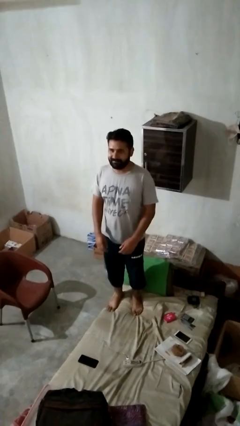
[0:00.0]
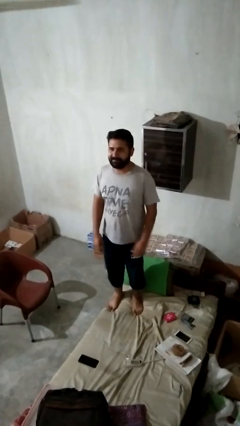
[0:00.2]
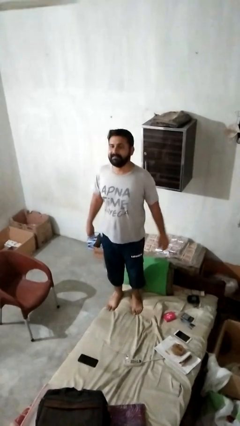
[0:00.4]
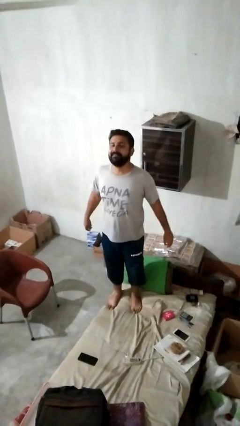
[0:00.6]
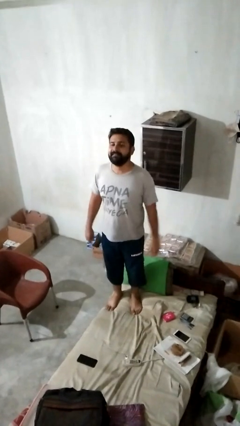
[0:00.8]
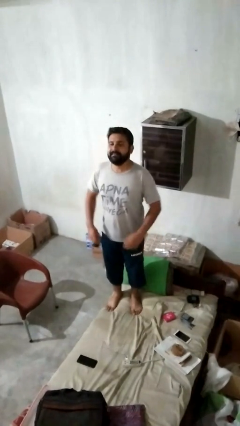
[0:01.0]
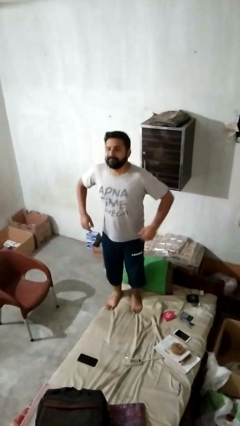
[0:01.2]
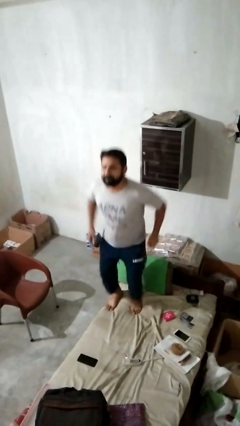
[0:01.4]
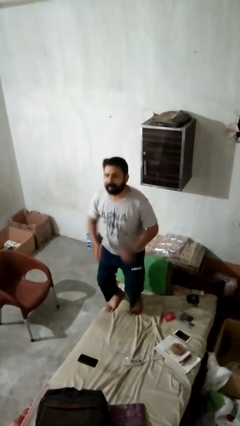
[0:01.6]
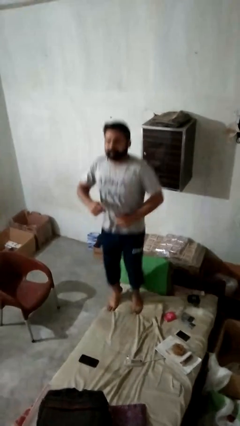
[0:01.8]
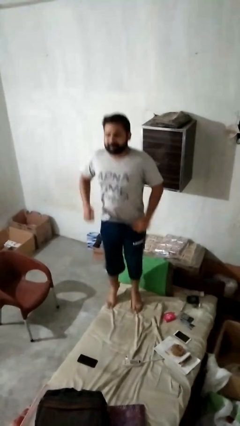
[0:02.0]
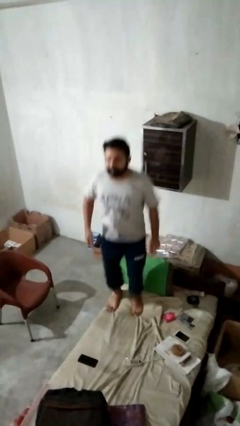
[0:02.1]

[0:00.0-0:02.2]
person jumps on bed

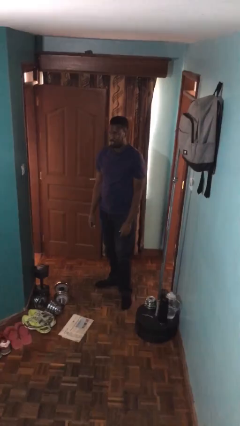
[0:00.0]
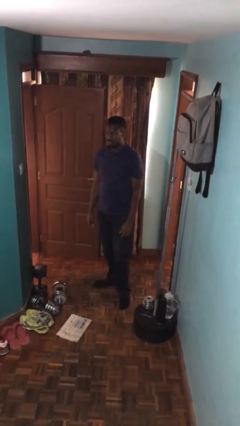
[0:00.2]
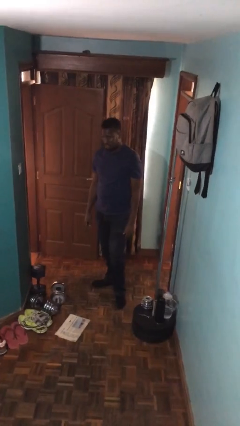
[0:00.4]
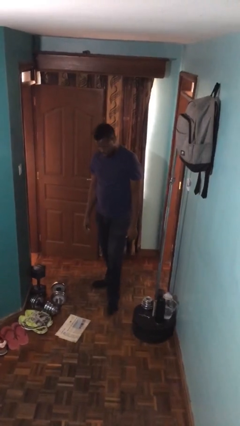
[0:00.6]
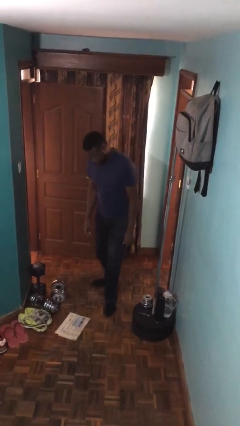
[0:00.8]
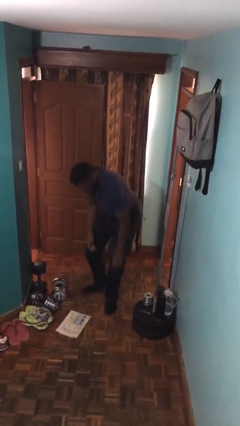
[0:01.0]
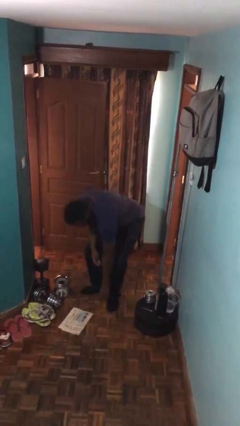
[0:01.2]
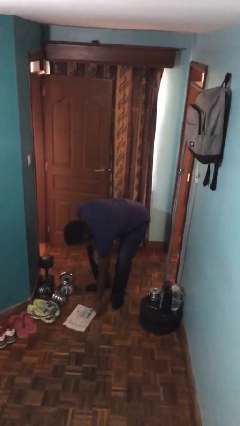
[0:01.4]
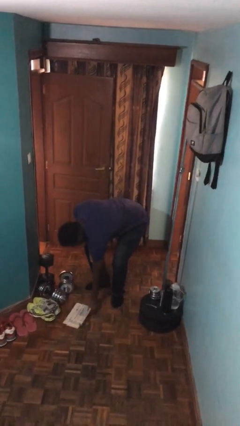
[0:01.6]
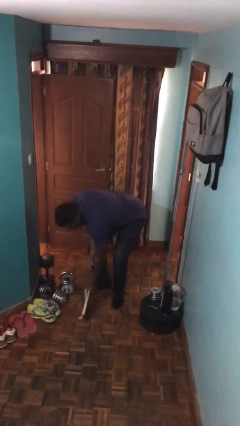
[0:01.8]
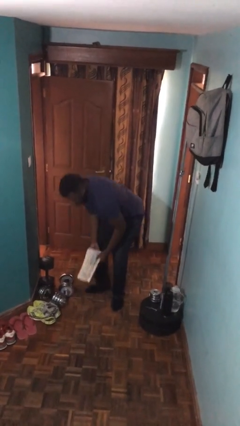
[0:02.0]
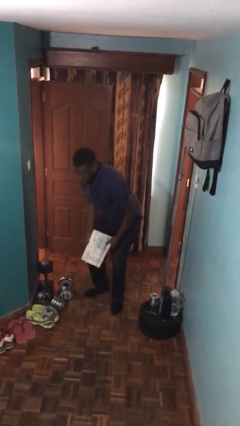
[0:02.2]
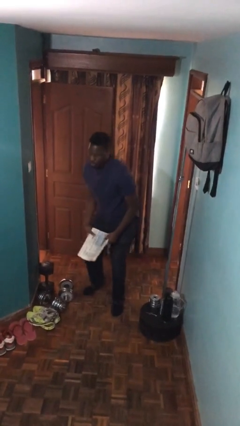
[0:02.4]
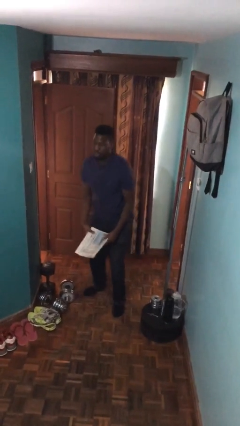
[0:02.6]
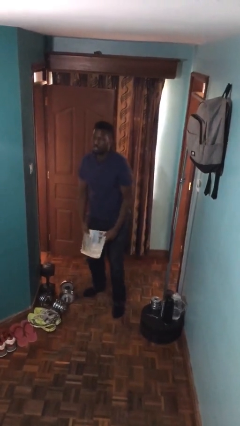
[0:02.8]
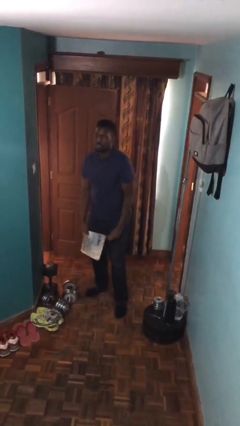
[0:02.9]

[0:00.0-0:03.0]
person picks up object from floor

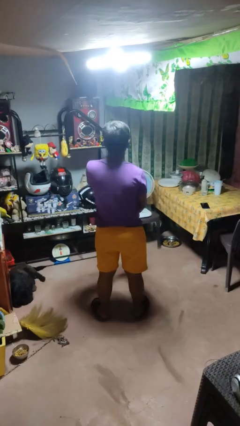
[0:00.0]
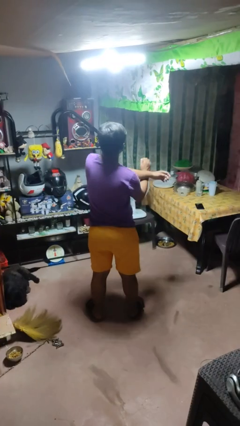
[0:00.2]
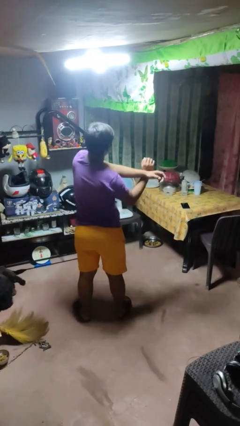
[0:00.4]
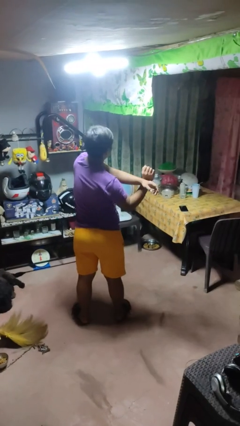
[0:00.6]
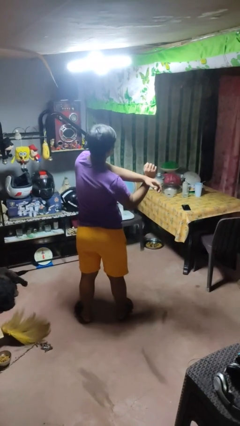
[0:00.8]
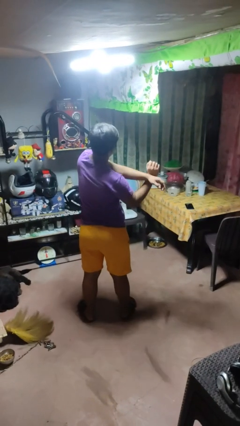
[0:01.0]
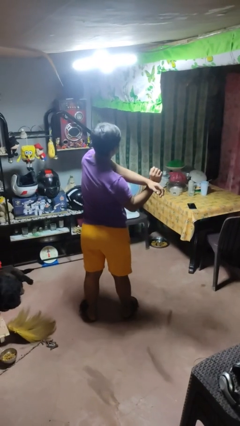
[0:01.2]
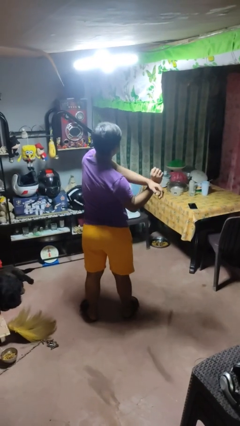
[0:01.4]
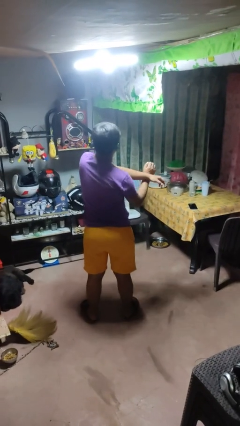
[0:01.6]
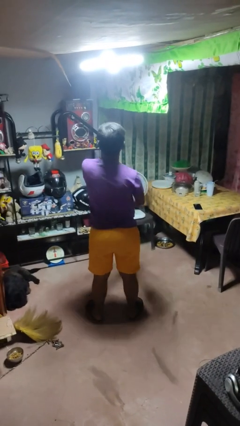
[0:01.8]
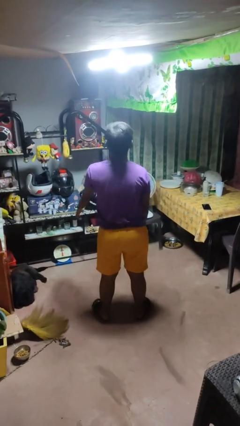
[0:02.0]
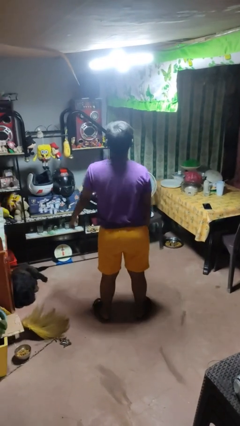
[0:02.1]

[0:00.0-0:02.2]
person crosses arms

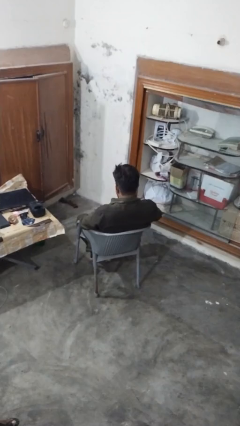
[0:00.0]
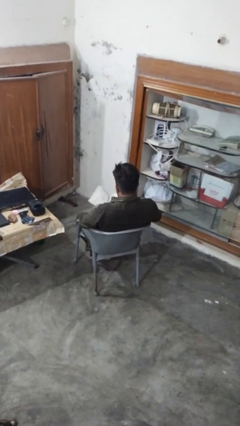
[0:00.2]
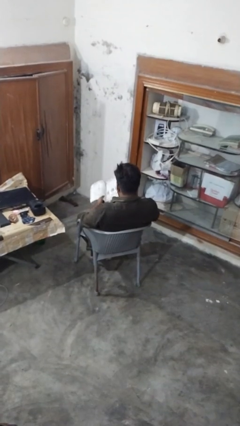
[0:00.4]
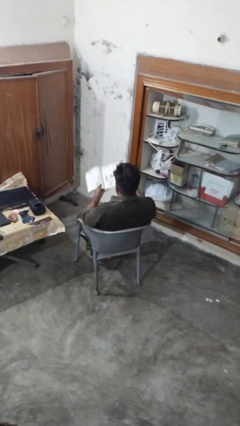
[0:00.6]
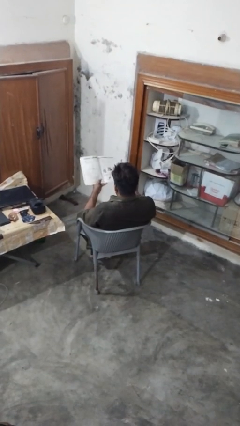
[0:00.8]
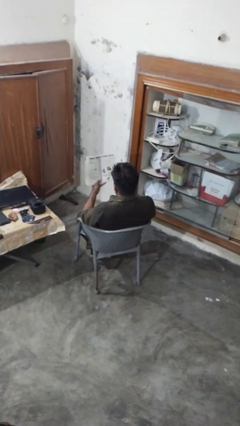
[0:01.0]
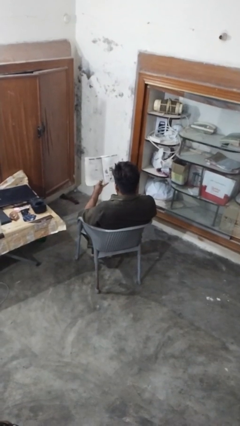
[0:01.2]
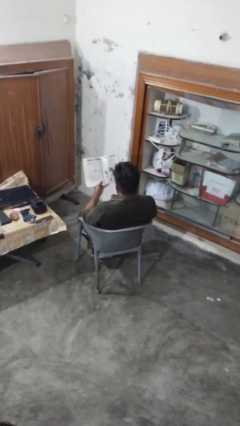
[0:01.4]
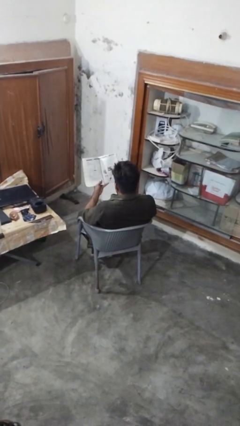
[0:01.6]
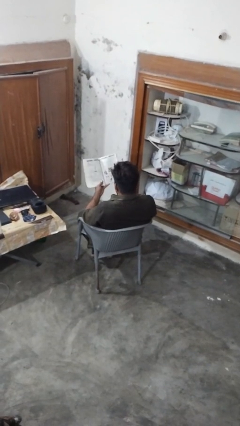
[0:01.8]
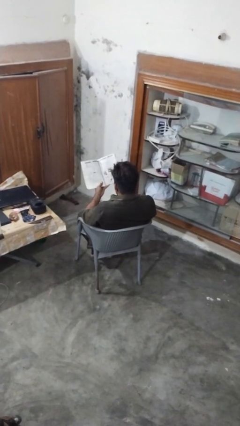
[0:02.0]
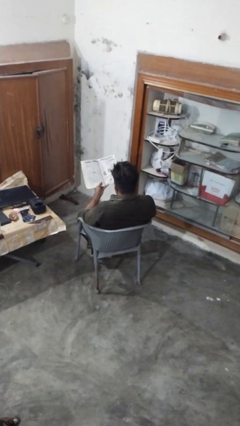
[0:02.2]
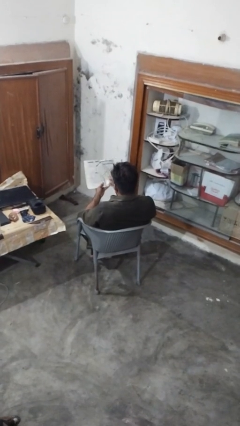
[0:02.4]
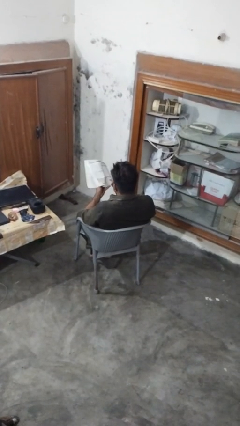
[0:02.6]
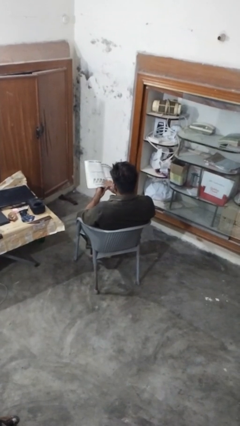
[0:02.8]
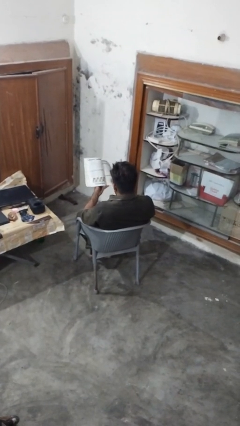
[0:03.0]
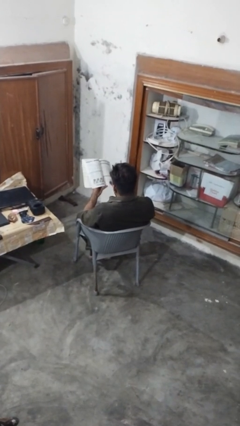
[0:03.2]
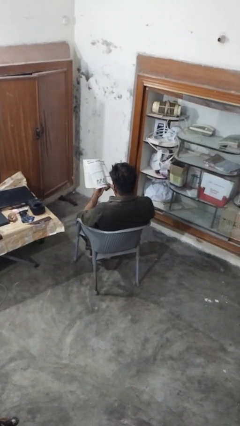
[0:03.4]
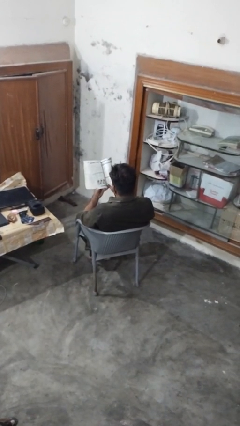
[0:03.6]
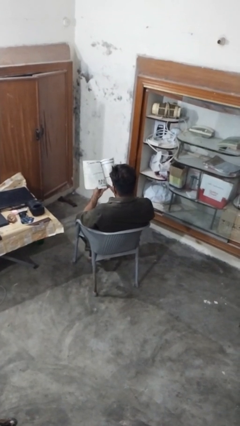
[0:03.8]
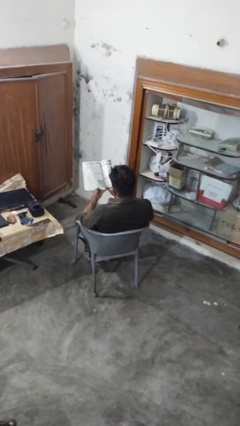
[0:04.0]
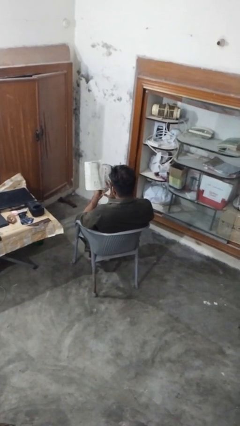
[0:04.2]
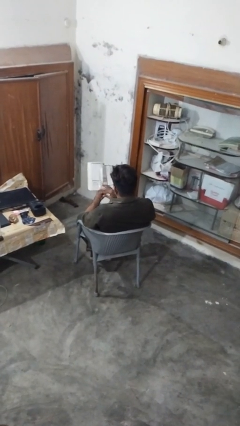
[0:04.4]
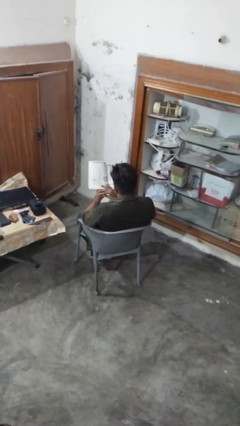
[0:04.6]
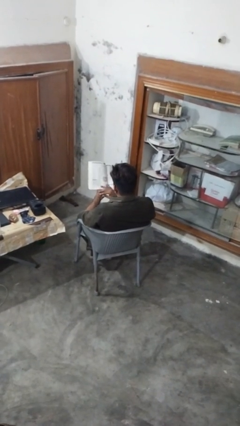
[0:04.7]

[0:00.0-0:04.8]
person reads book

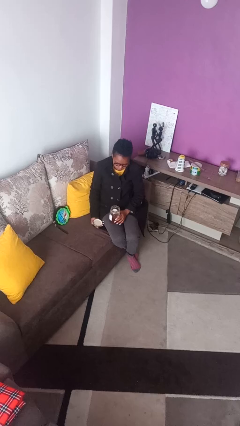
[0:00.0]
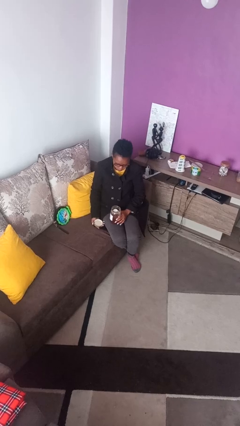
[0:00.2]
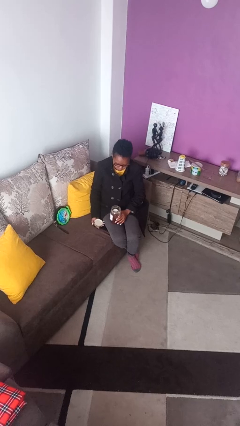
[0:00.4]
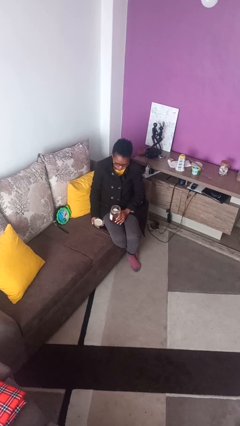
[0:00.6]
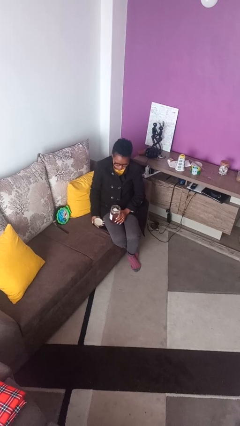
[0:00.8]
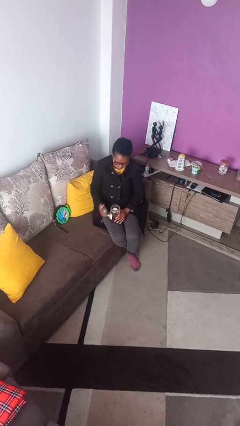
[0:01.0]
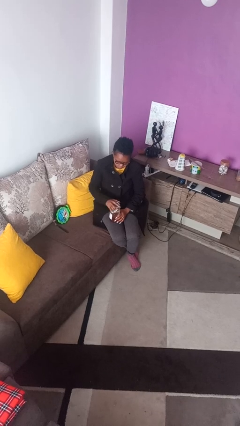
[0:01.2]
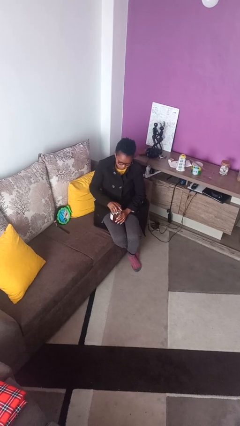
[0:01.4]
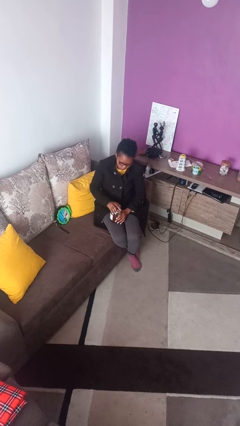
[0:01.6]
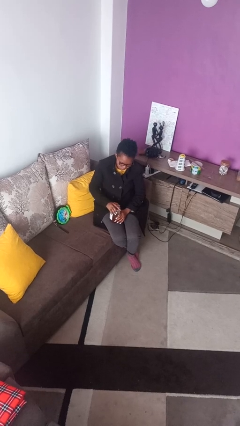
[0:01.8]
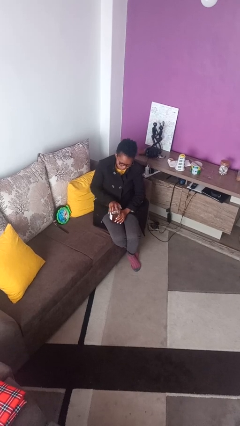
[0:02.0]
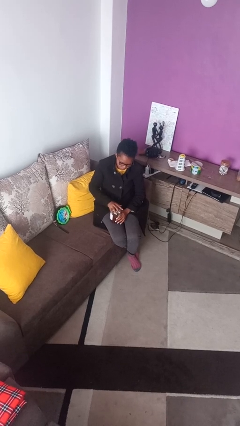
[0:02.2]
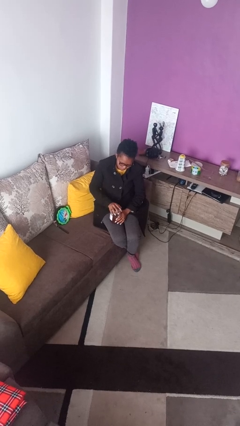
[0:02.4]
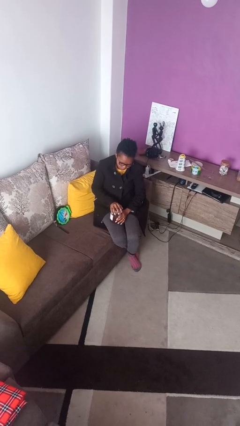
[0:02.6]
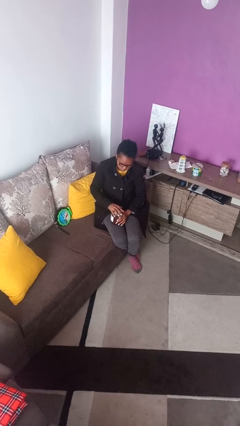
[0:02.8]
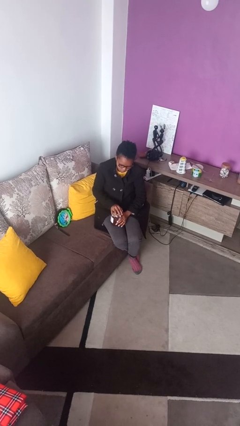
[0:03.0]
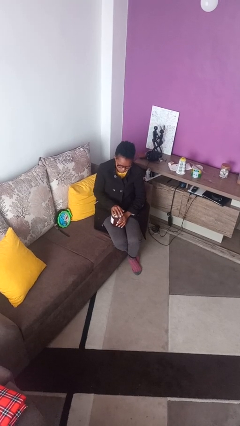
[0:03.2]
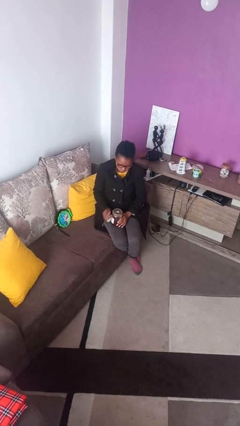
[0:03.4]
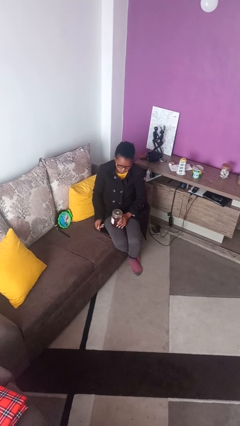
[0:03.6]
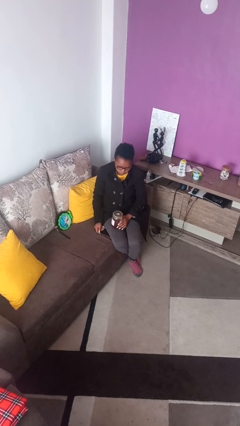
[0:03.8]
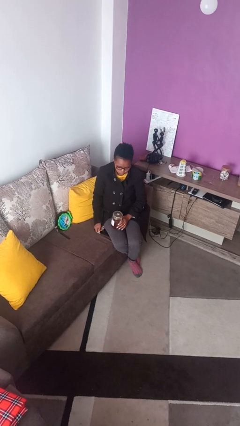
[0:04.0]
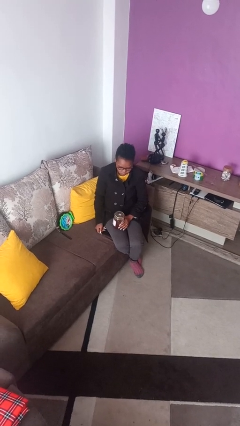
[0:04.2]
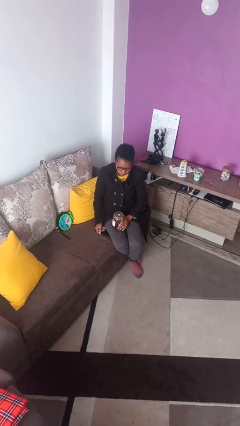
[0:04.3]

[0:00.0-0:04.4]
person closes jar

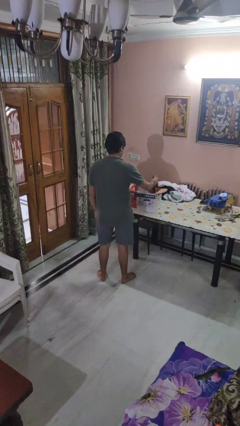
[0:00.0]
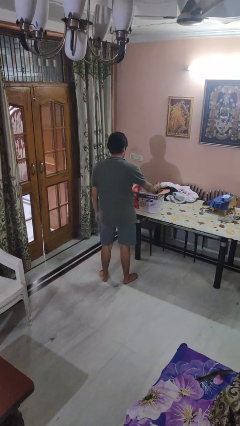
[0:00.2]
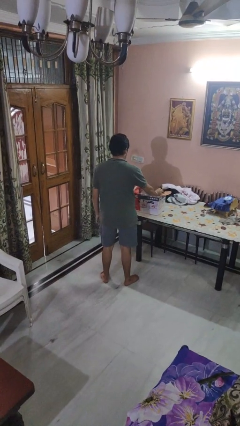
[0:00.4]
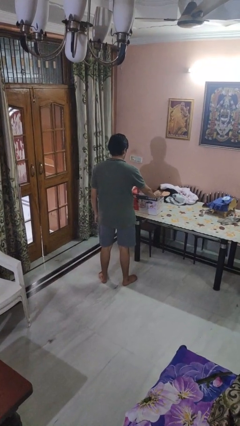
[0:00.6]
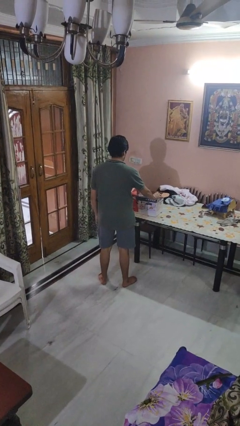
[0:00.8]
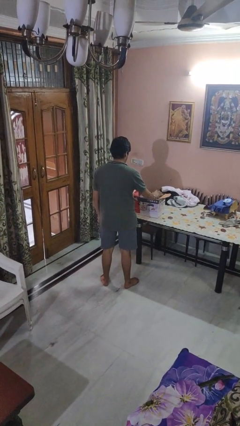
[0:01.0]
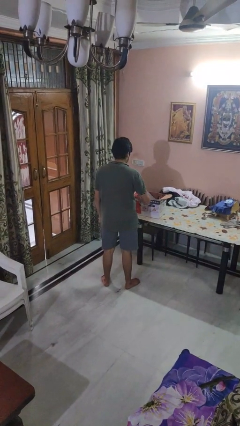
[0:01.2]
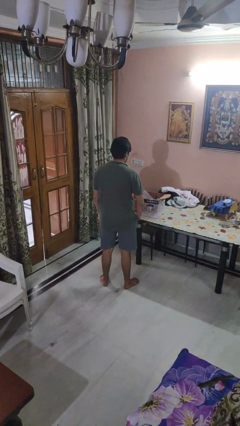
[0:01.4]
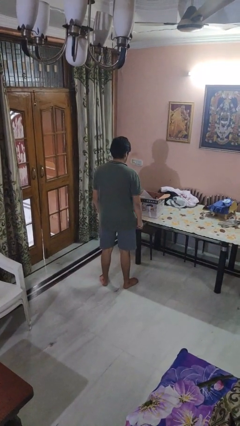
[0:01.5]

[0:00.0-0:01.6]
person puts object into box
